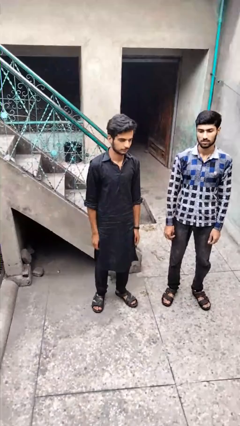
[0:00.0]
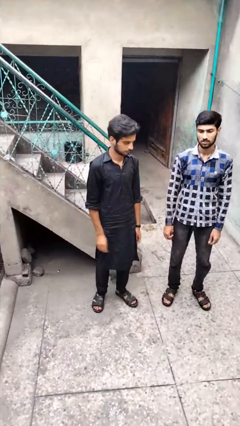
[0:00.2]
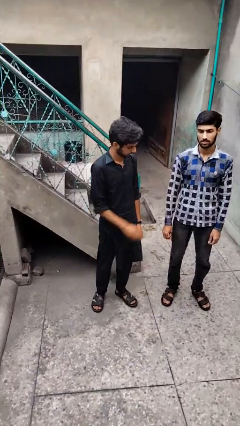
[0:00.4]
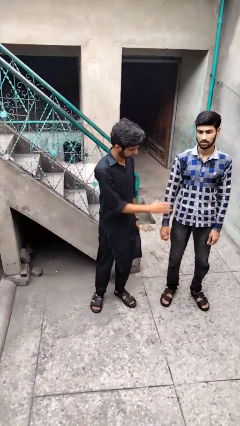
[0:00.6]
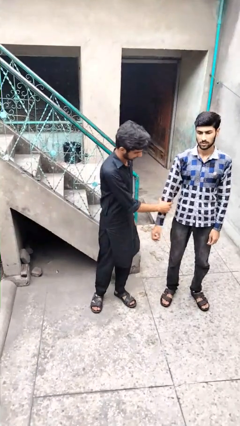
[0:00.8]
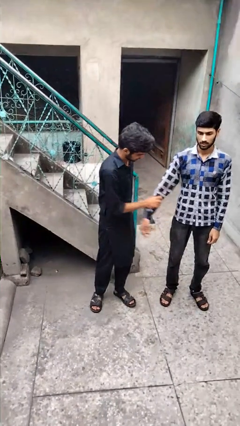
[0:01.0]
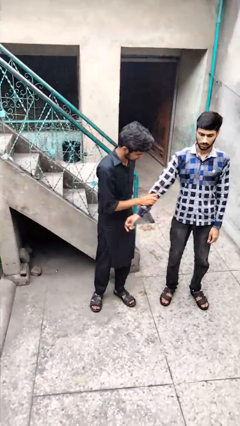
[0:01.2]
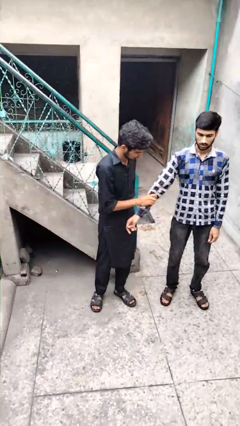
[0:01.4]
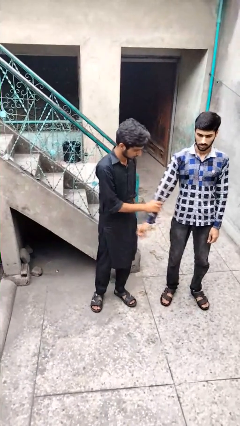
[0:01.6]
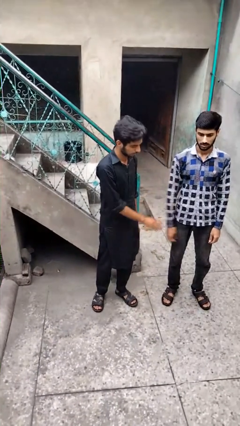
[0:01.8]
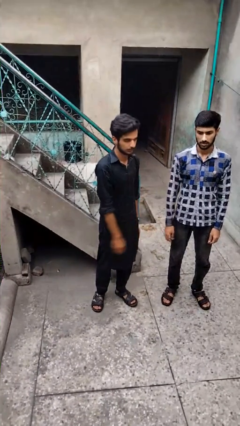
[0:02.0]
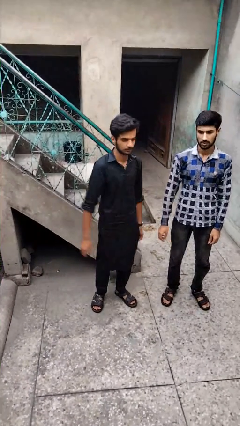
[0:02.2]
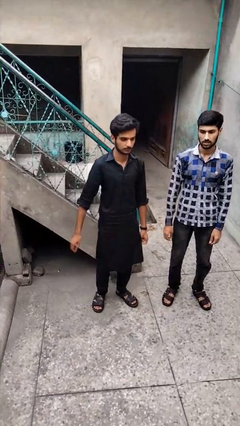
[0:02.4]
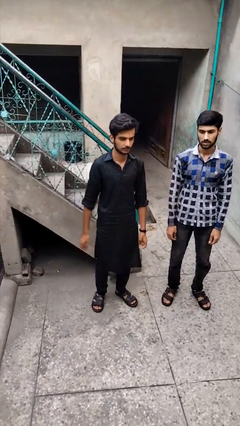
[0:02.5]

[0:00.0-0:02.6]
person grabs person by forearm

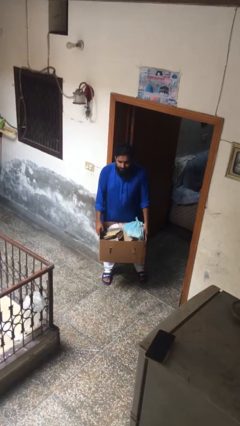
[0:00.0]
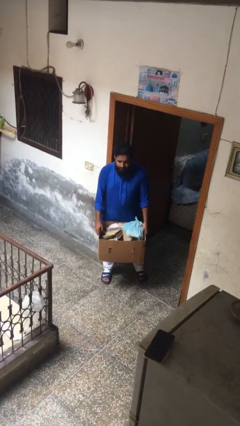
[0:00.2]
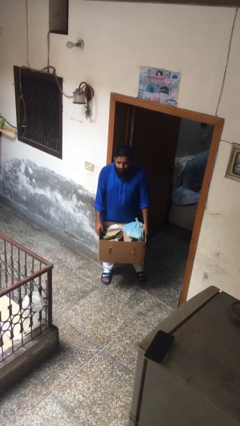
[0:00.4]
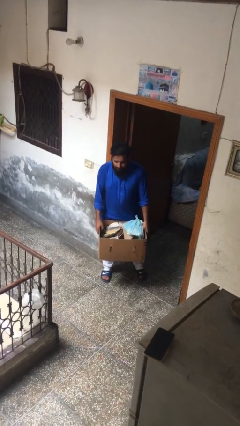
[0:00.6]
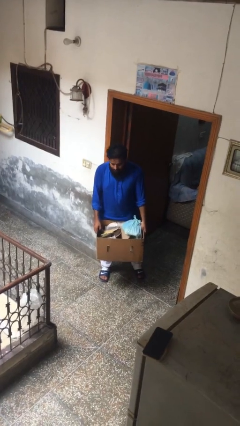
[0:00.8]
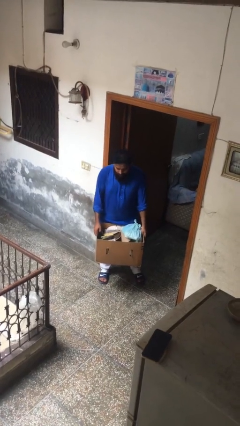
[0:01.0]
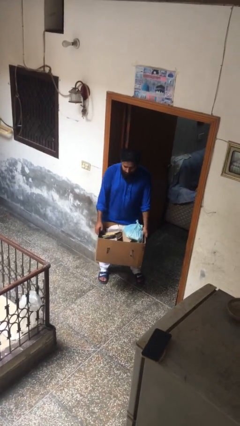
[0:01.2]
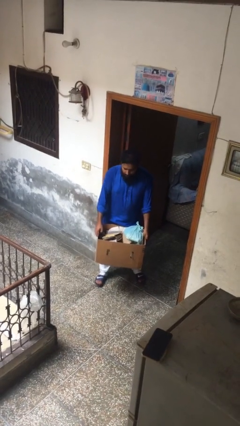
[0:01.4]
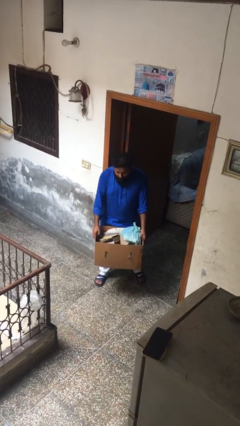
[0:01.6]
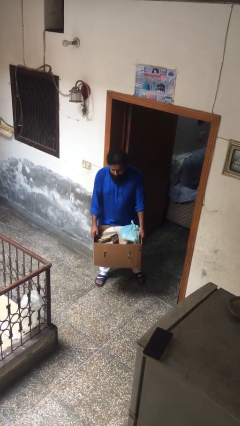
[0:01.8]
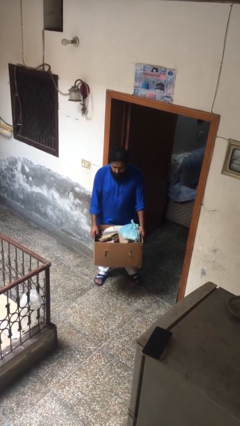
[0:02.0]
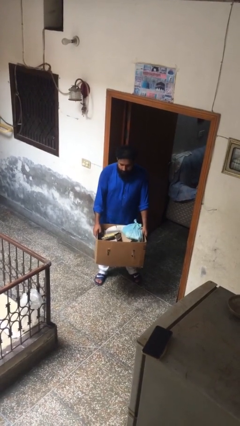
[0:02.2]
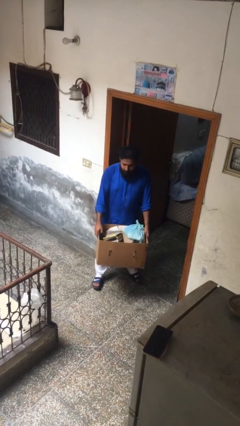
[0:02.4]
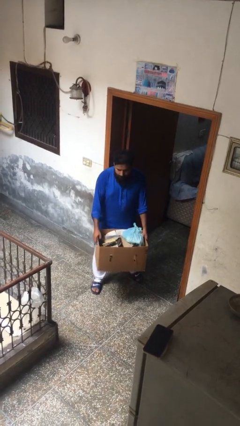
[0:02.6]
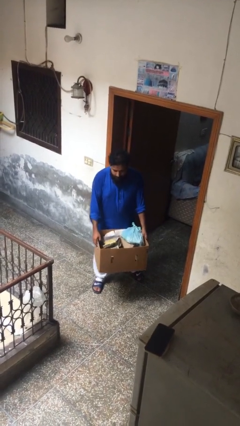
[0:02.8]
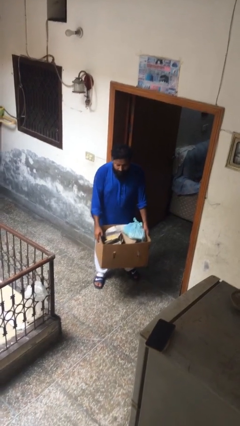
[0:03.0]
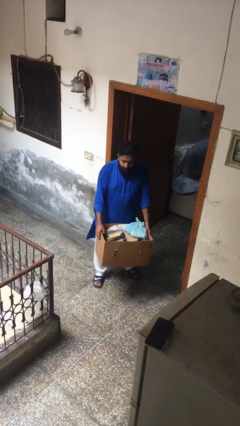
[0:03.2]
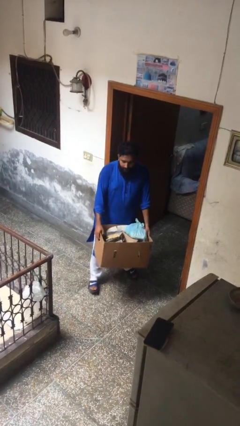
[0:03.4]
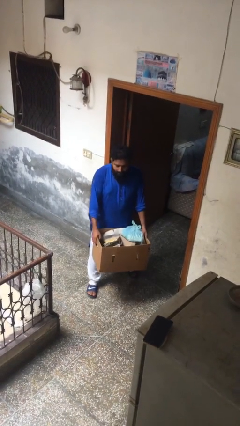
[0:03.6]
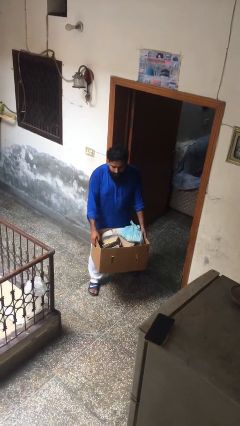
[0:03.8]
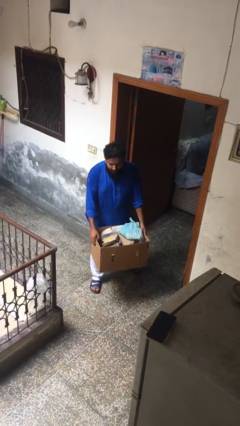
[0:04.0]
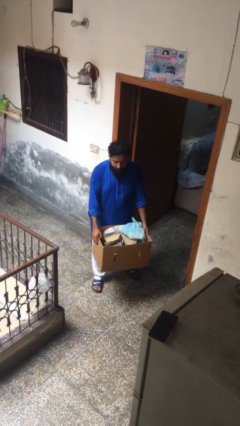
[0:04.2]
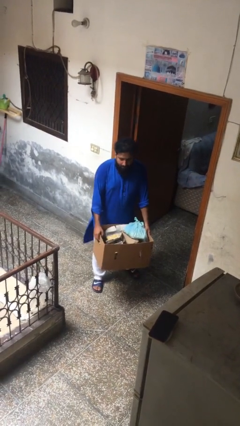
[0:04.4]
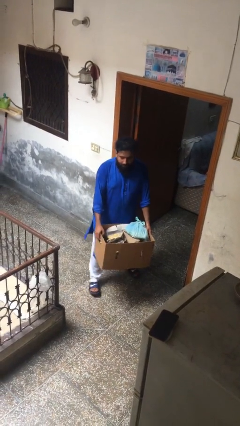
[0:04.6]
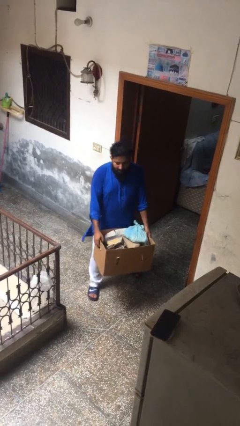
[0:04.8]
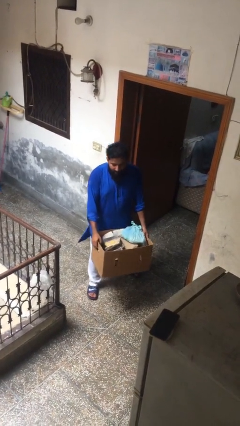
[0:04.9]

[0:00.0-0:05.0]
person carries heavy object

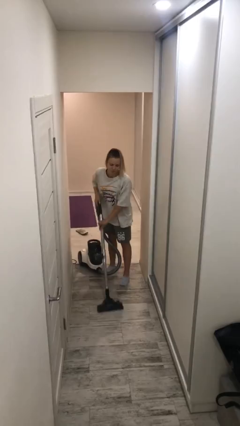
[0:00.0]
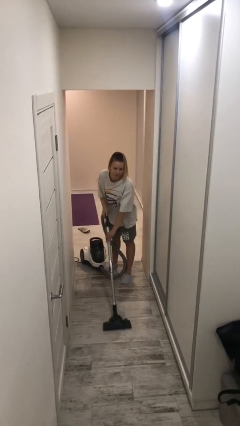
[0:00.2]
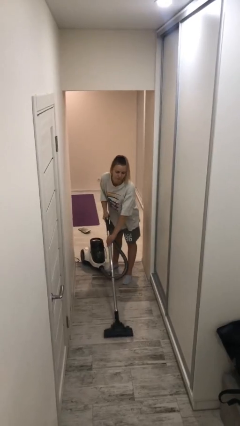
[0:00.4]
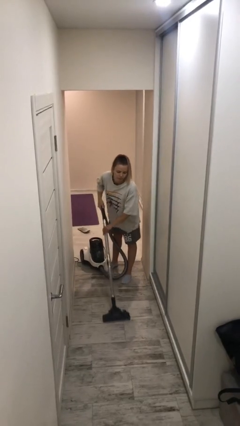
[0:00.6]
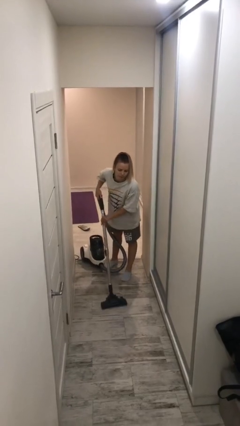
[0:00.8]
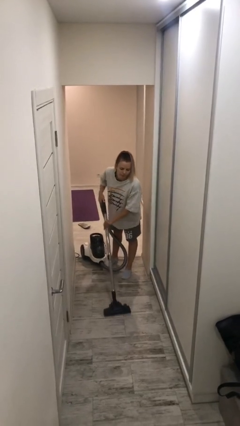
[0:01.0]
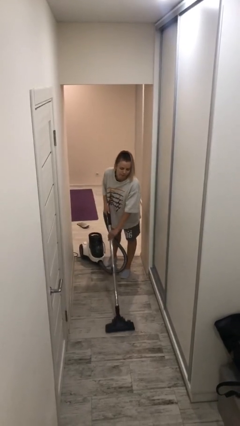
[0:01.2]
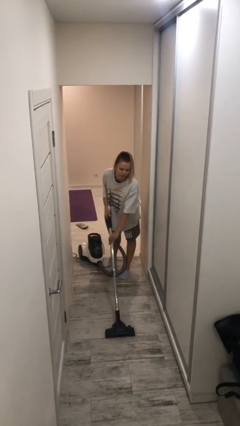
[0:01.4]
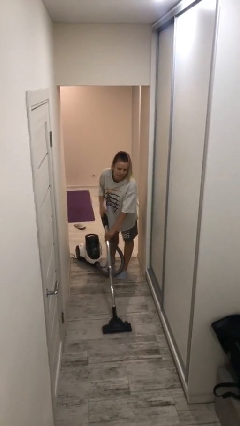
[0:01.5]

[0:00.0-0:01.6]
person vacuums carpet

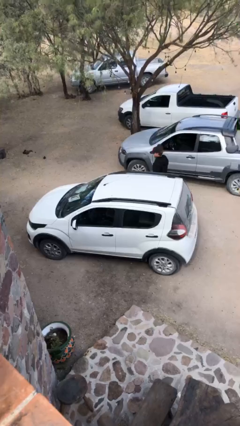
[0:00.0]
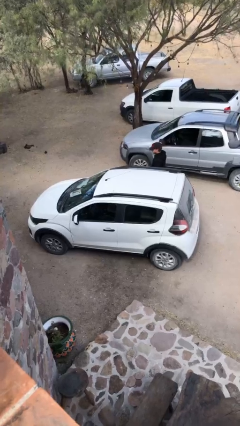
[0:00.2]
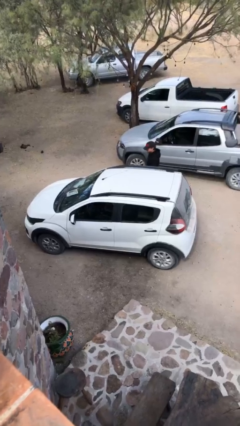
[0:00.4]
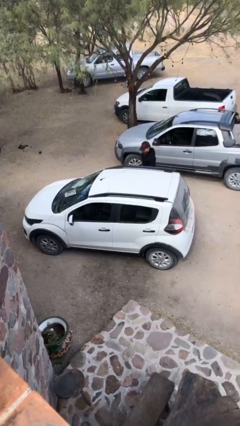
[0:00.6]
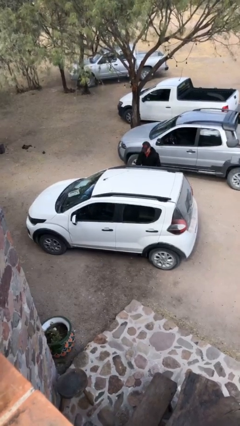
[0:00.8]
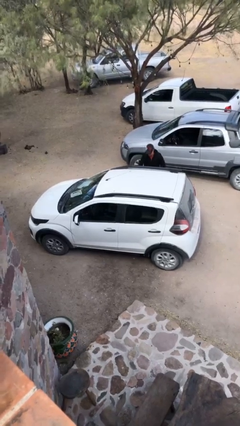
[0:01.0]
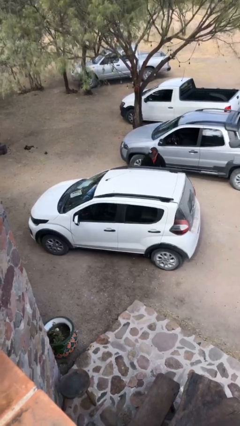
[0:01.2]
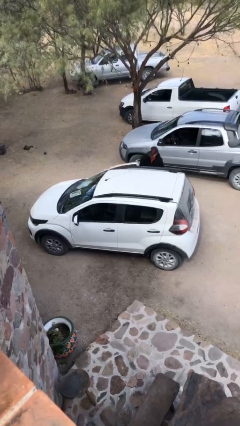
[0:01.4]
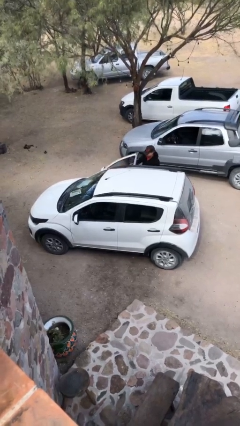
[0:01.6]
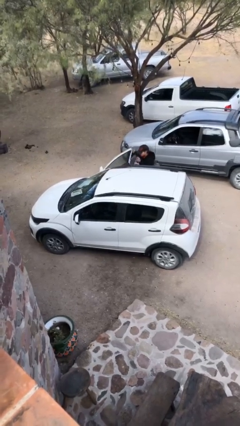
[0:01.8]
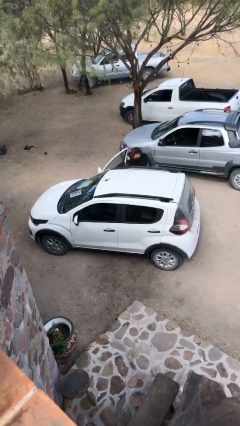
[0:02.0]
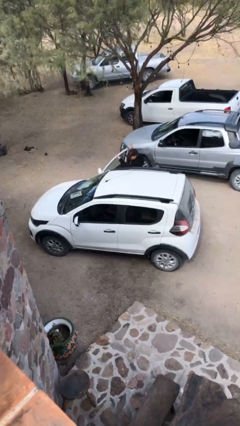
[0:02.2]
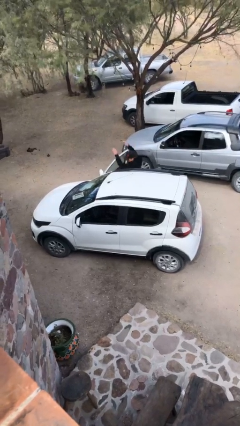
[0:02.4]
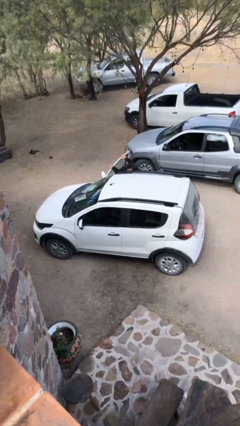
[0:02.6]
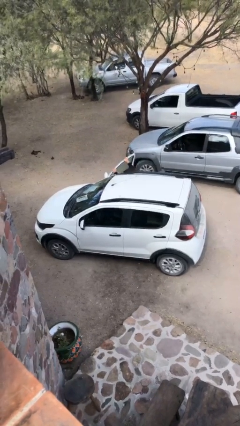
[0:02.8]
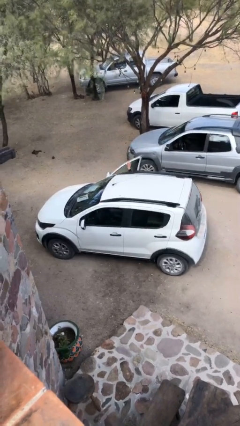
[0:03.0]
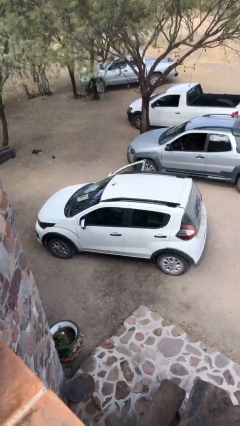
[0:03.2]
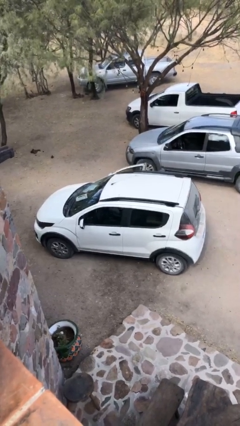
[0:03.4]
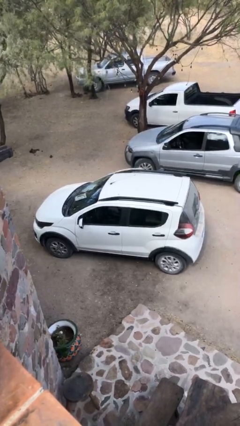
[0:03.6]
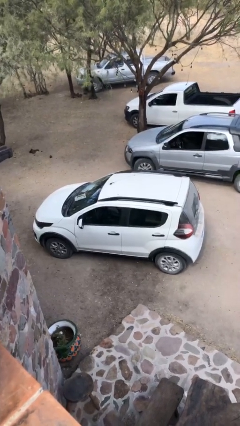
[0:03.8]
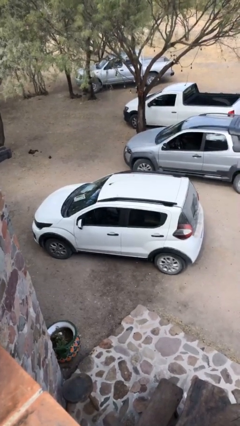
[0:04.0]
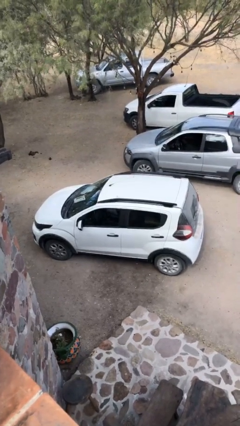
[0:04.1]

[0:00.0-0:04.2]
car picks up person

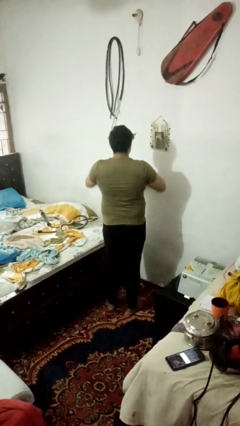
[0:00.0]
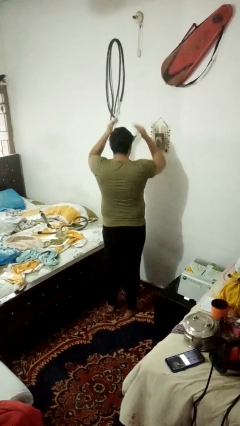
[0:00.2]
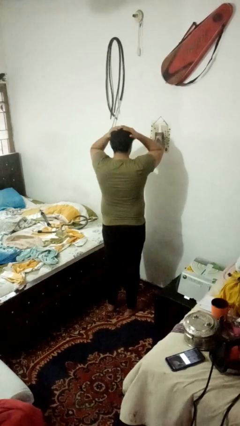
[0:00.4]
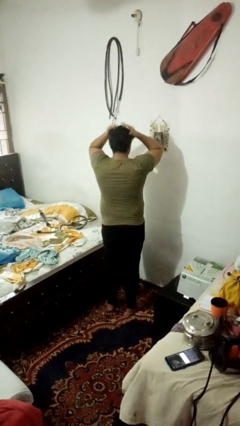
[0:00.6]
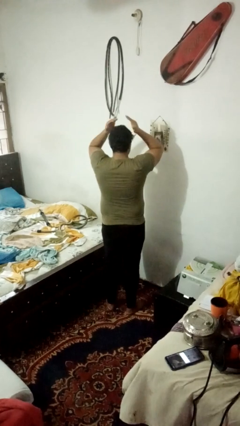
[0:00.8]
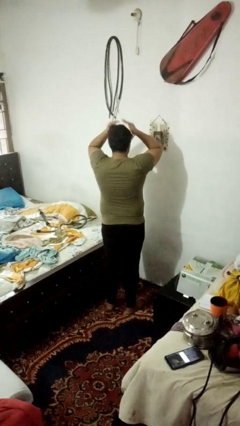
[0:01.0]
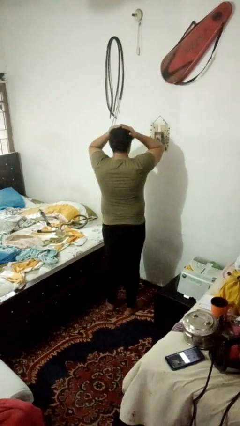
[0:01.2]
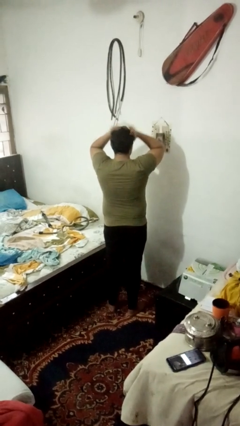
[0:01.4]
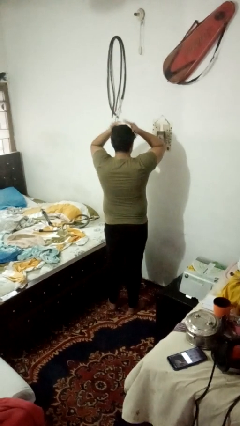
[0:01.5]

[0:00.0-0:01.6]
person pats head

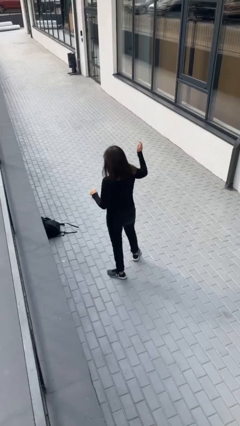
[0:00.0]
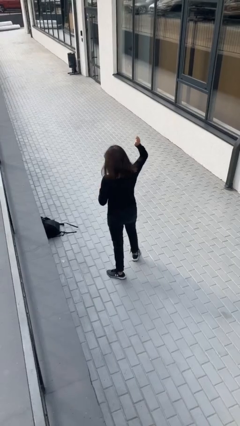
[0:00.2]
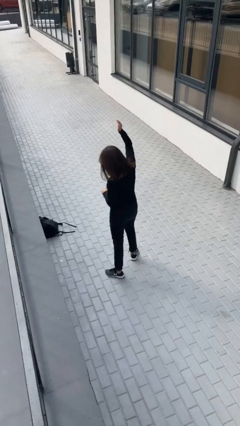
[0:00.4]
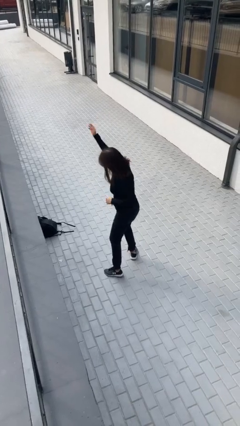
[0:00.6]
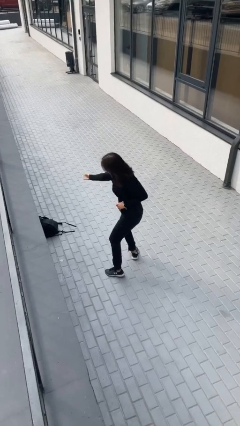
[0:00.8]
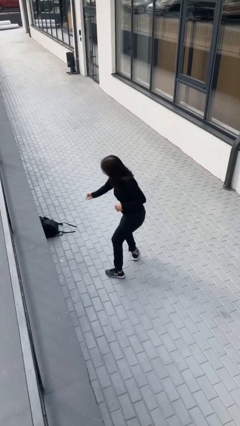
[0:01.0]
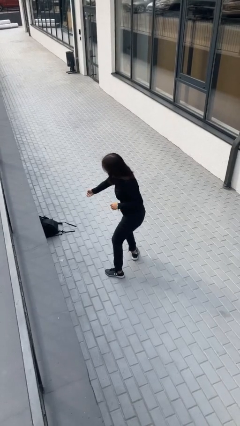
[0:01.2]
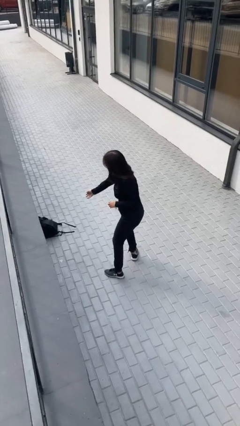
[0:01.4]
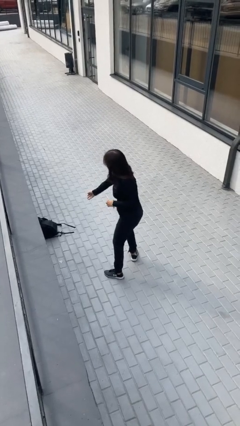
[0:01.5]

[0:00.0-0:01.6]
person karate chop

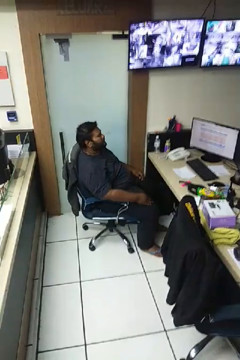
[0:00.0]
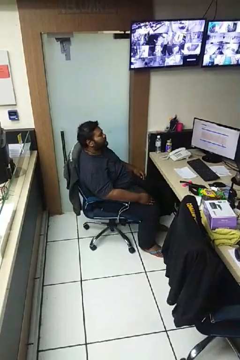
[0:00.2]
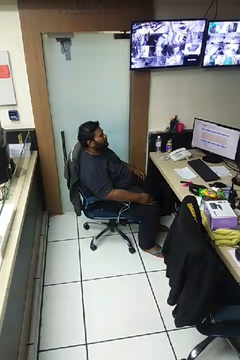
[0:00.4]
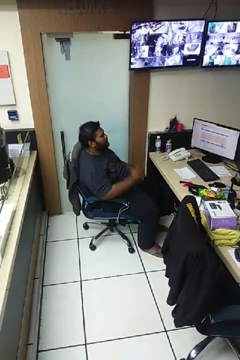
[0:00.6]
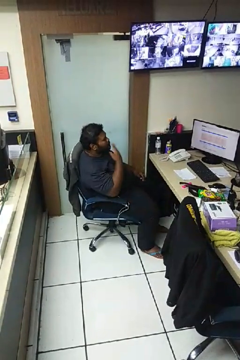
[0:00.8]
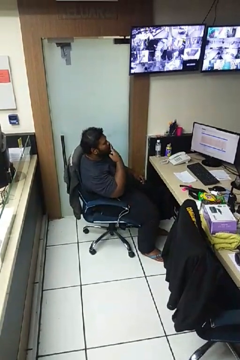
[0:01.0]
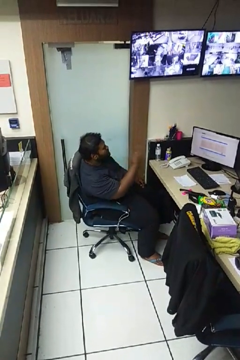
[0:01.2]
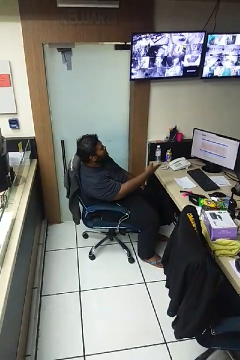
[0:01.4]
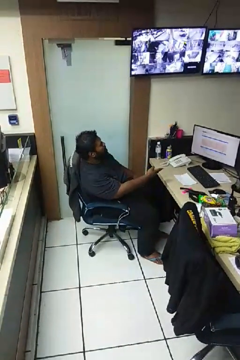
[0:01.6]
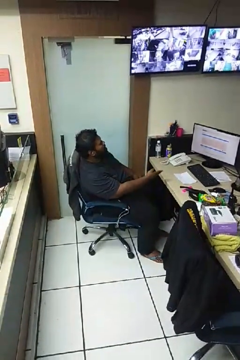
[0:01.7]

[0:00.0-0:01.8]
person gestures blow kiss
